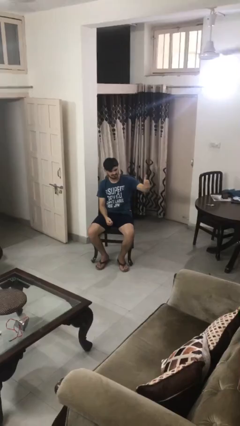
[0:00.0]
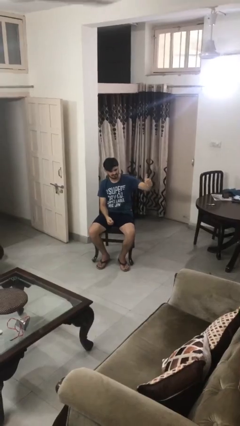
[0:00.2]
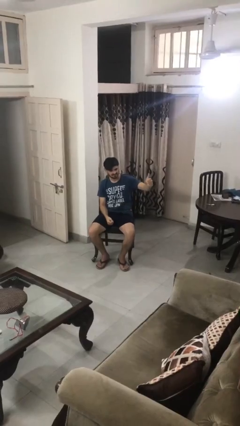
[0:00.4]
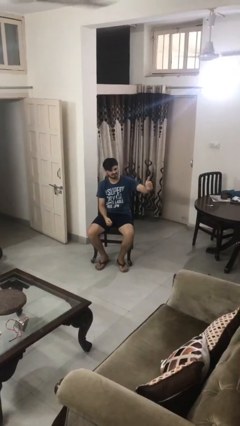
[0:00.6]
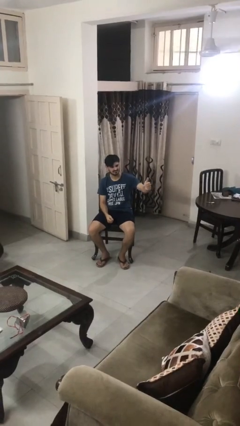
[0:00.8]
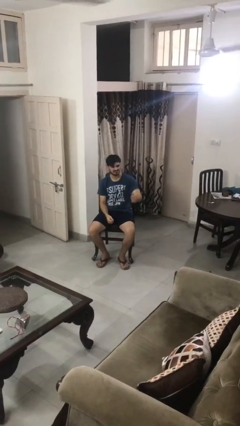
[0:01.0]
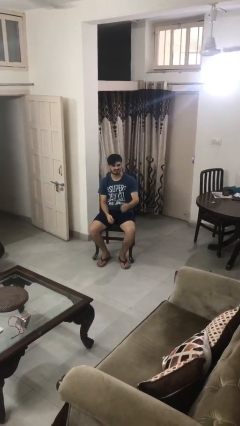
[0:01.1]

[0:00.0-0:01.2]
person gestures thumbs up

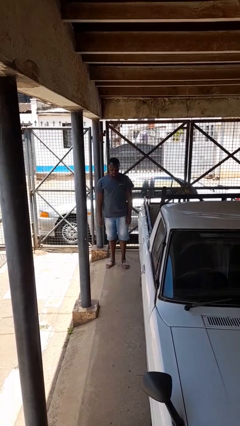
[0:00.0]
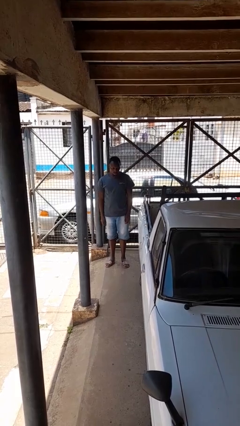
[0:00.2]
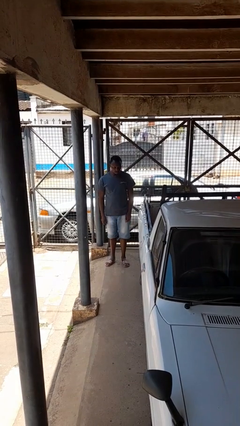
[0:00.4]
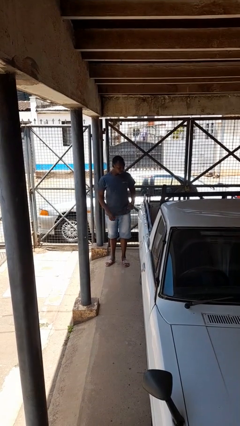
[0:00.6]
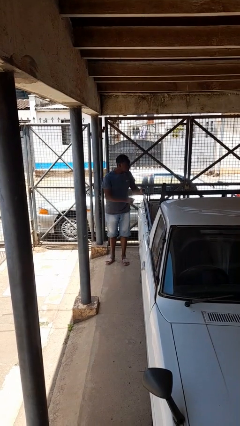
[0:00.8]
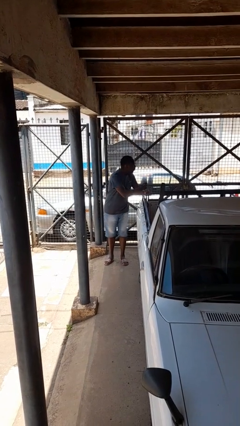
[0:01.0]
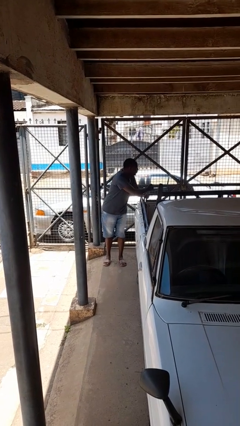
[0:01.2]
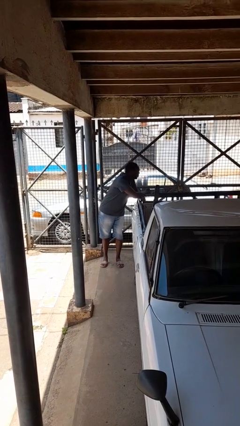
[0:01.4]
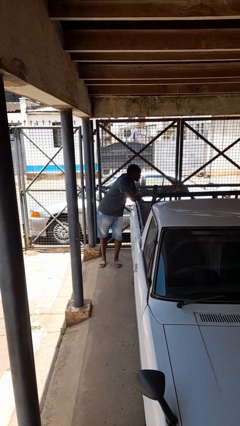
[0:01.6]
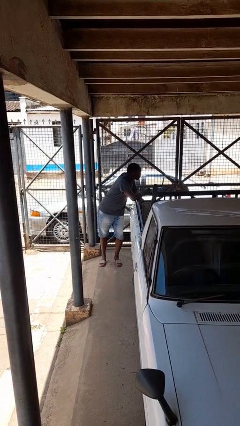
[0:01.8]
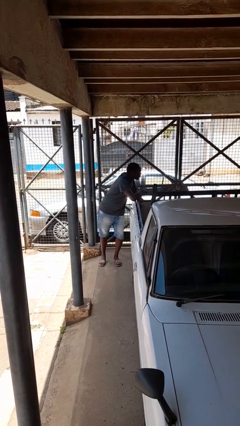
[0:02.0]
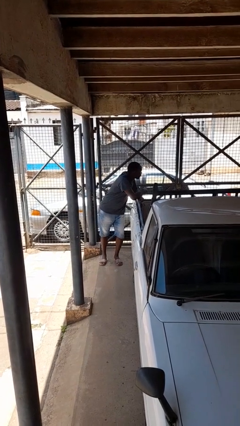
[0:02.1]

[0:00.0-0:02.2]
person leans against car

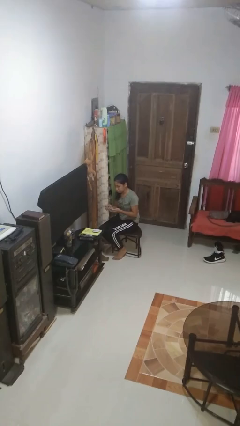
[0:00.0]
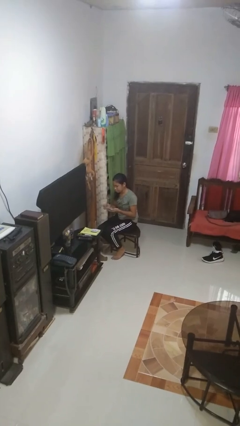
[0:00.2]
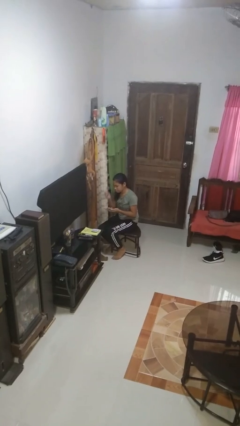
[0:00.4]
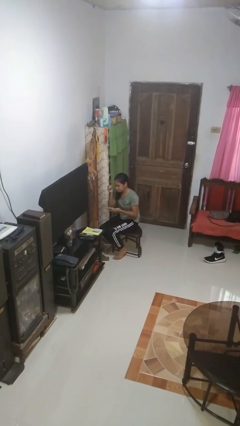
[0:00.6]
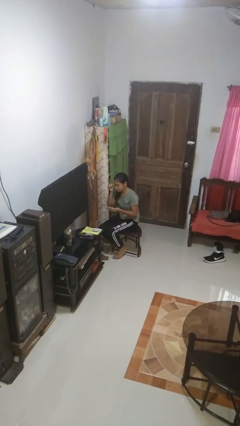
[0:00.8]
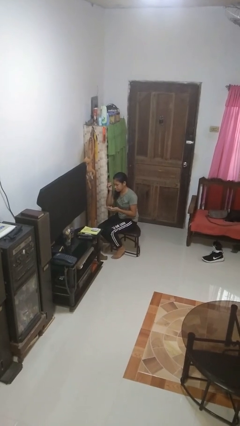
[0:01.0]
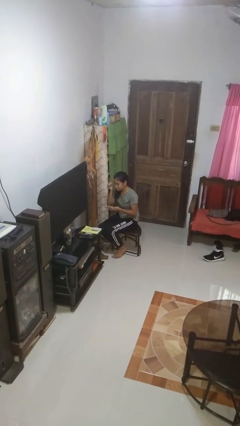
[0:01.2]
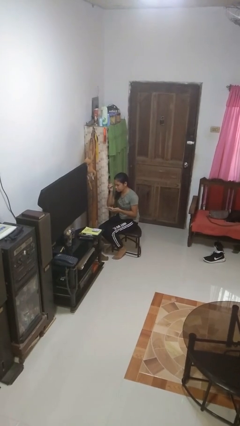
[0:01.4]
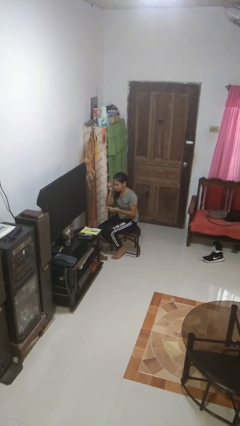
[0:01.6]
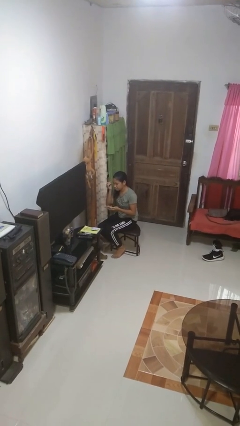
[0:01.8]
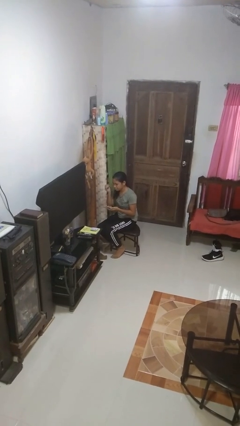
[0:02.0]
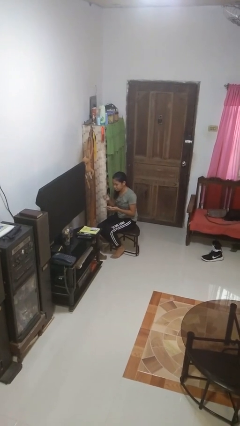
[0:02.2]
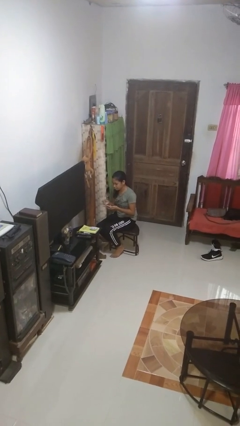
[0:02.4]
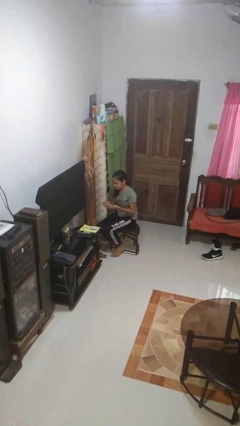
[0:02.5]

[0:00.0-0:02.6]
person applies eye makeup

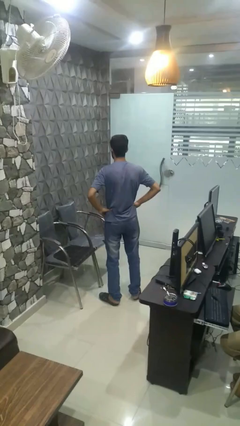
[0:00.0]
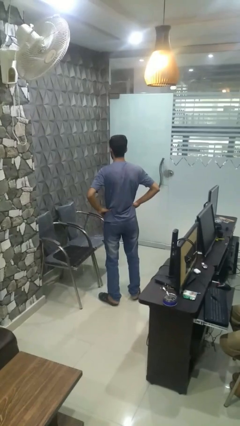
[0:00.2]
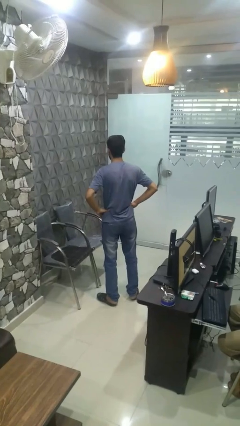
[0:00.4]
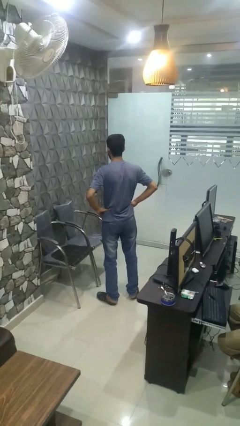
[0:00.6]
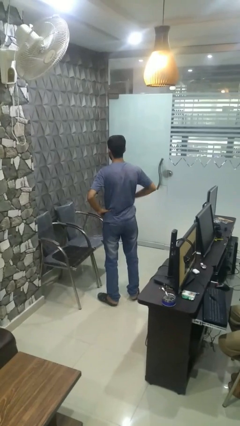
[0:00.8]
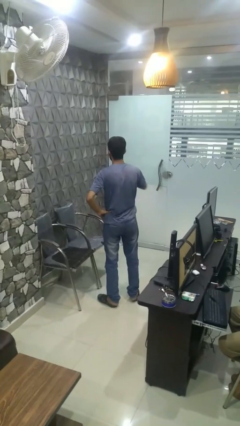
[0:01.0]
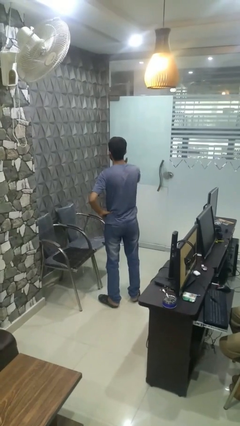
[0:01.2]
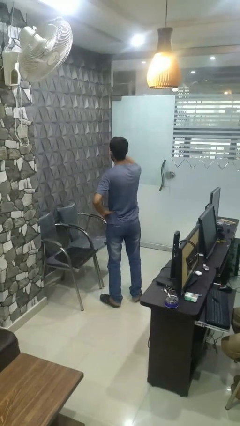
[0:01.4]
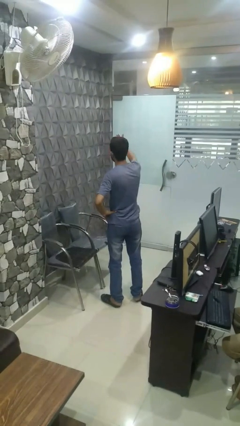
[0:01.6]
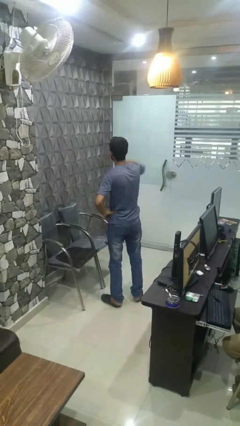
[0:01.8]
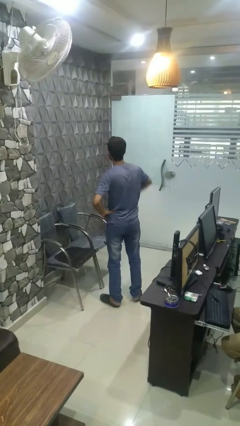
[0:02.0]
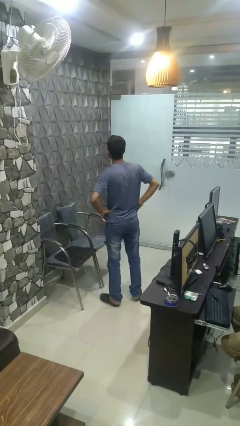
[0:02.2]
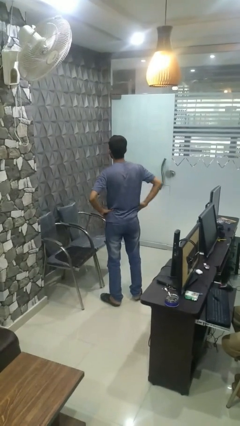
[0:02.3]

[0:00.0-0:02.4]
person gestures blow kiss

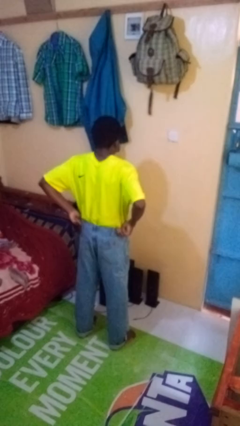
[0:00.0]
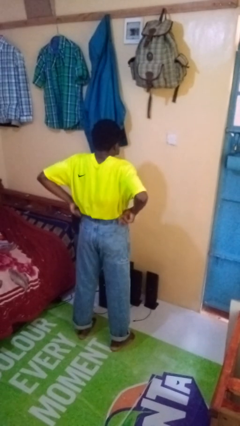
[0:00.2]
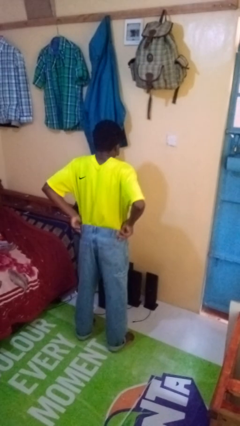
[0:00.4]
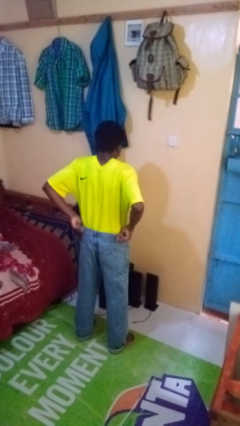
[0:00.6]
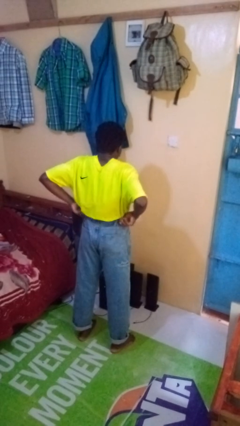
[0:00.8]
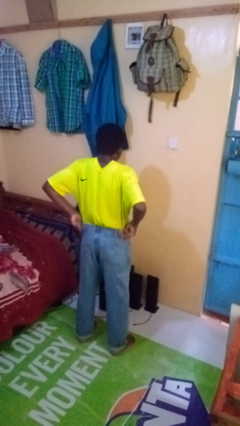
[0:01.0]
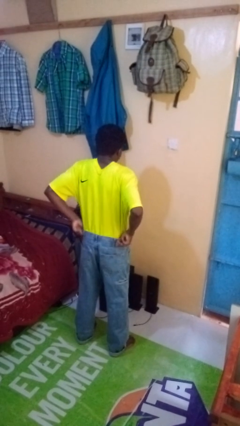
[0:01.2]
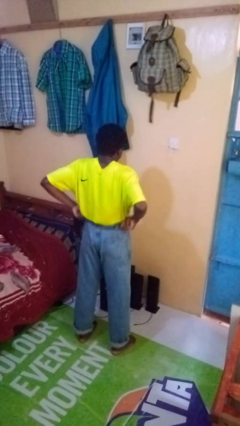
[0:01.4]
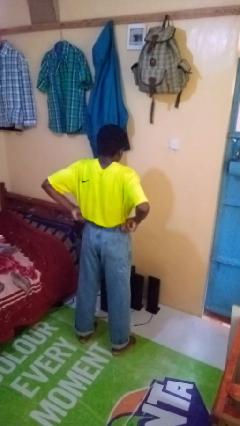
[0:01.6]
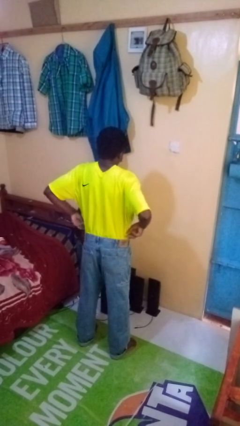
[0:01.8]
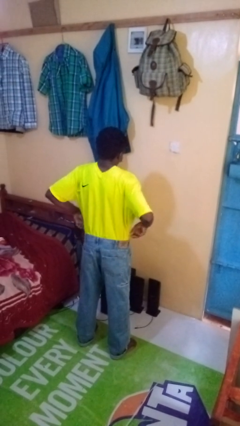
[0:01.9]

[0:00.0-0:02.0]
person hikes up pants

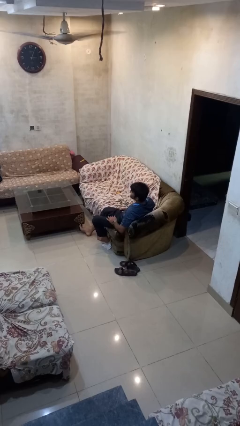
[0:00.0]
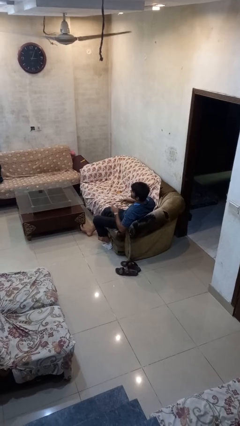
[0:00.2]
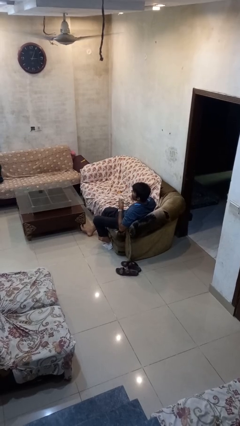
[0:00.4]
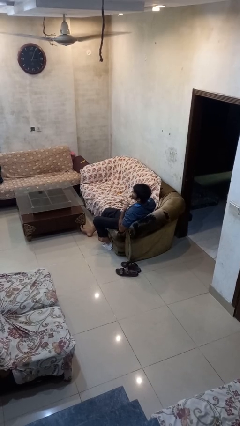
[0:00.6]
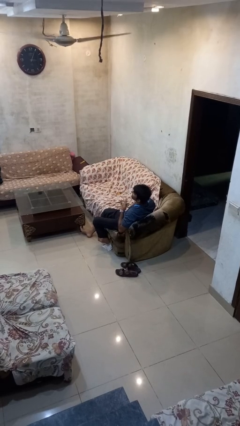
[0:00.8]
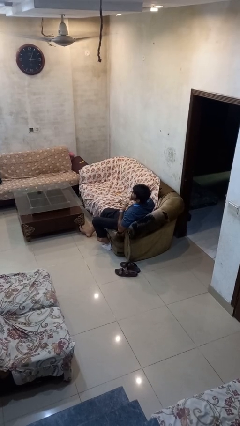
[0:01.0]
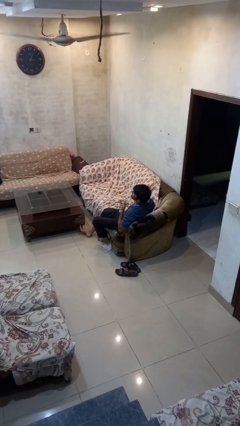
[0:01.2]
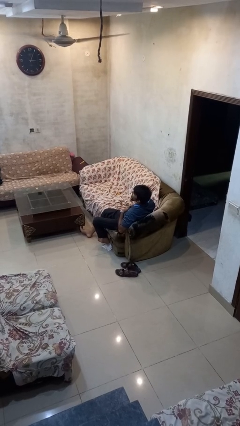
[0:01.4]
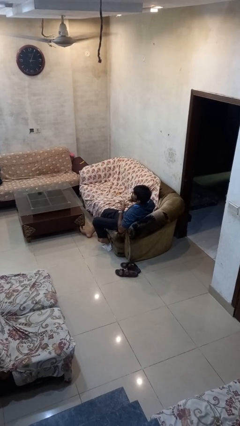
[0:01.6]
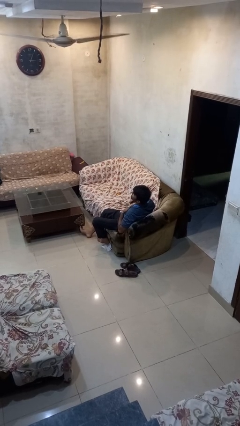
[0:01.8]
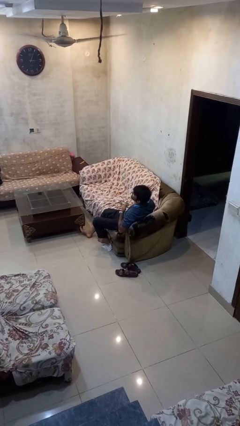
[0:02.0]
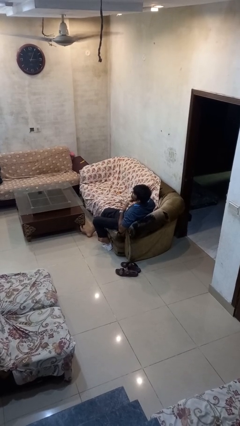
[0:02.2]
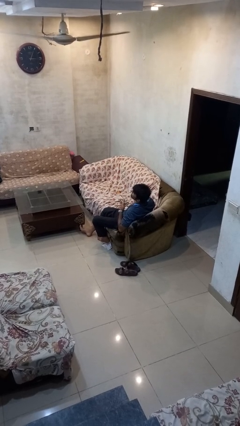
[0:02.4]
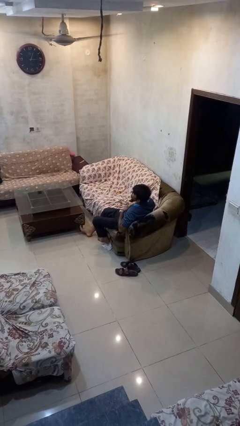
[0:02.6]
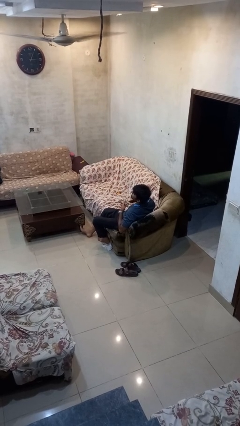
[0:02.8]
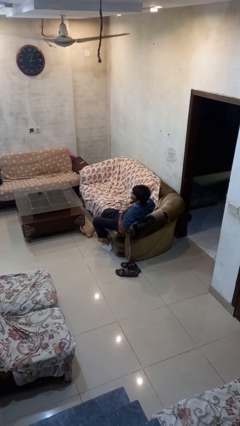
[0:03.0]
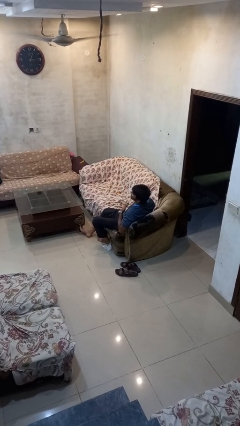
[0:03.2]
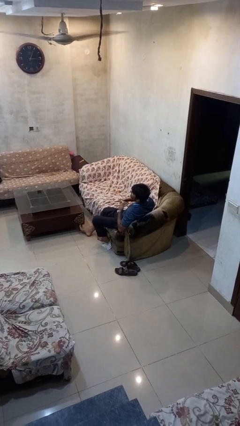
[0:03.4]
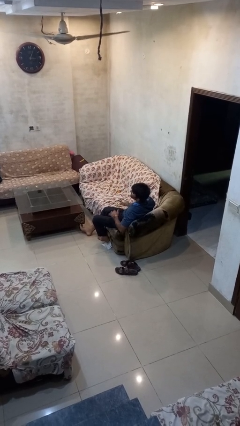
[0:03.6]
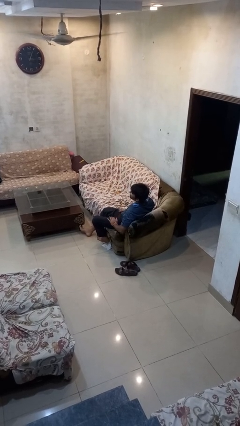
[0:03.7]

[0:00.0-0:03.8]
person drums on chest

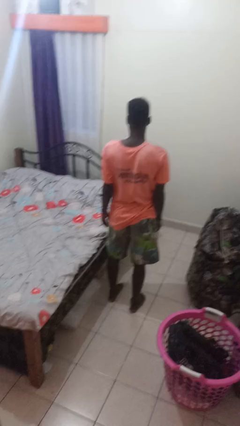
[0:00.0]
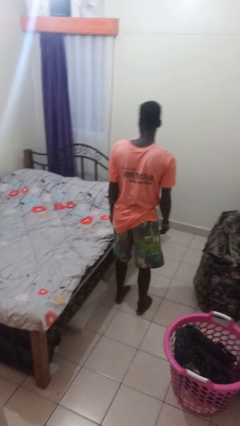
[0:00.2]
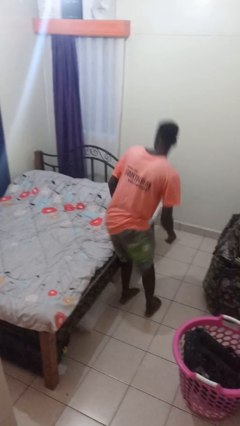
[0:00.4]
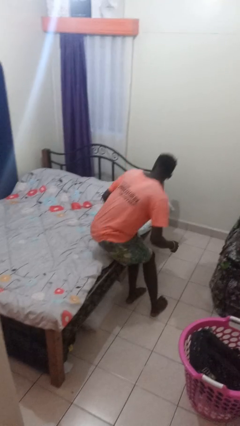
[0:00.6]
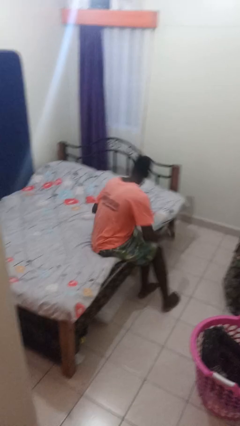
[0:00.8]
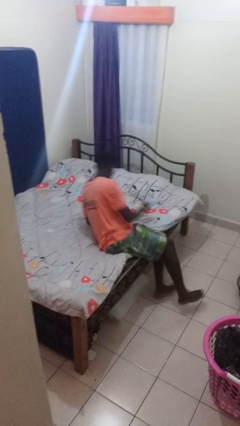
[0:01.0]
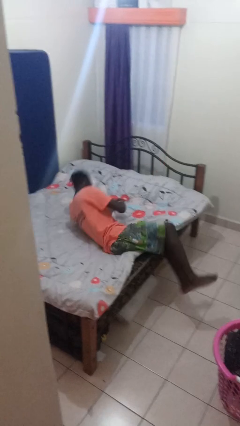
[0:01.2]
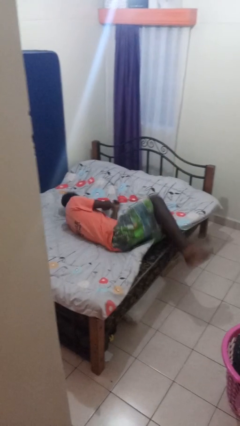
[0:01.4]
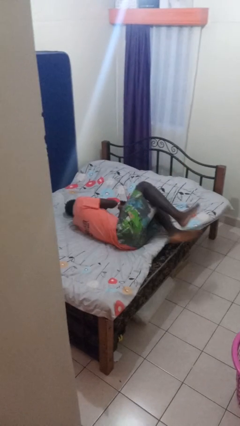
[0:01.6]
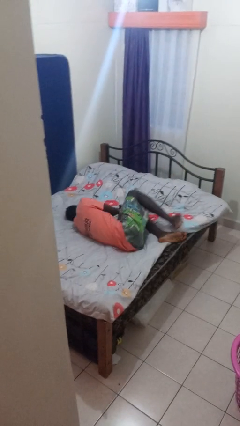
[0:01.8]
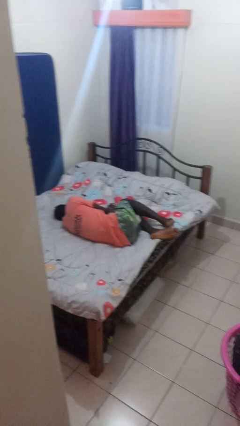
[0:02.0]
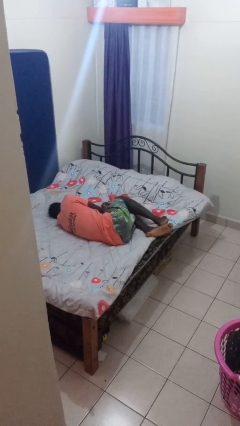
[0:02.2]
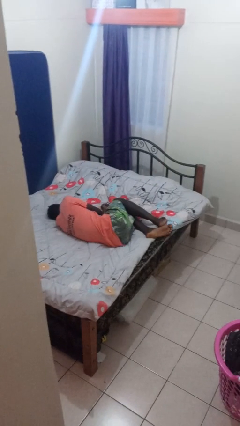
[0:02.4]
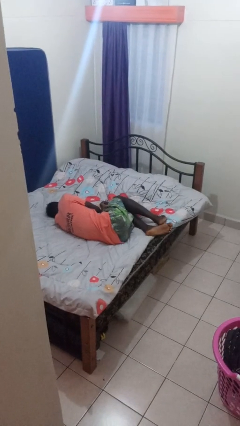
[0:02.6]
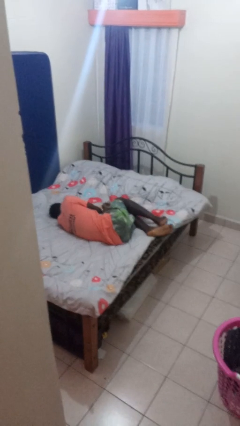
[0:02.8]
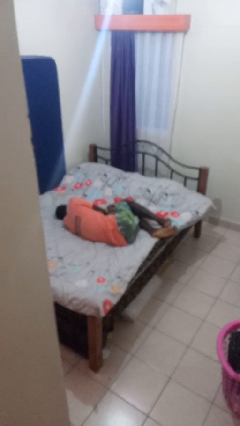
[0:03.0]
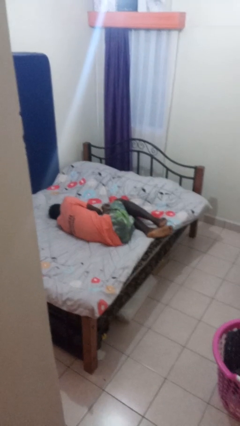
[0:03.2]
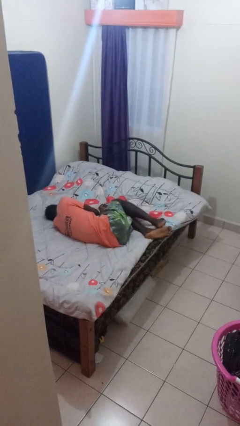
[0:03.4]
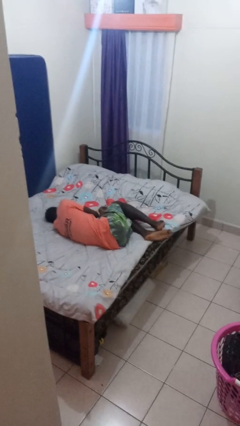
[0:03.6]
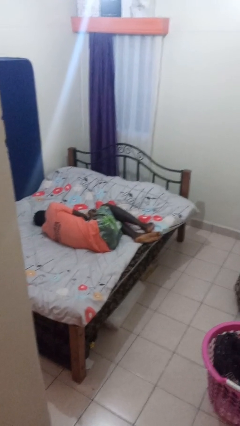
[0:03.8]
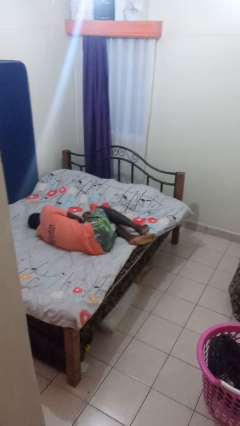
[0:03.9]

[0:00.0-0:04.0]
person lies down on bed
